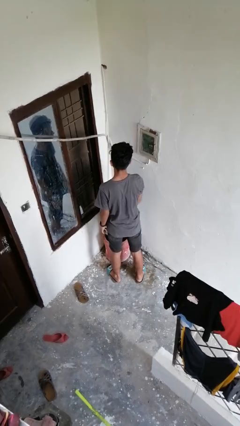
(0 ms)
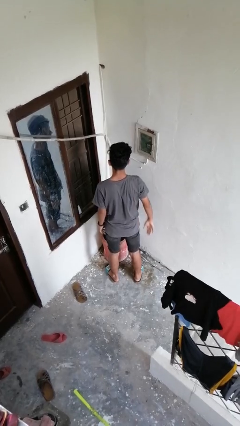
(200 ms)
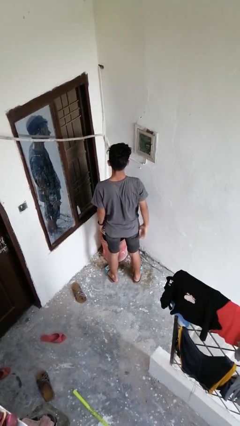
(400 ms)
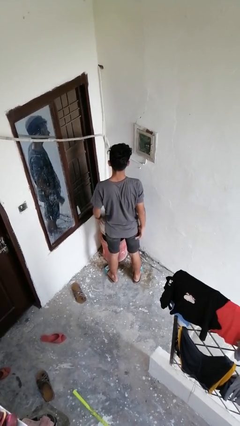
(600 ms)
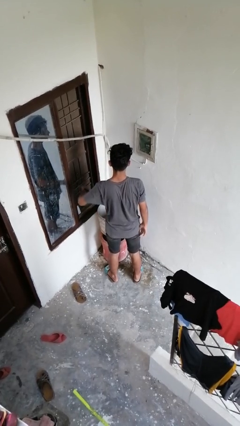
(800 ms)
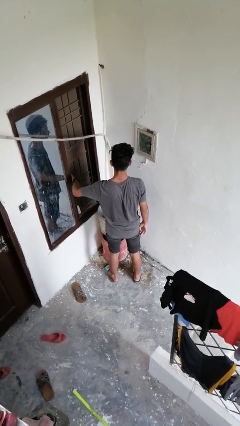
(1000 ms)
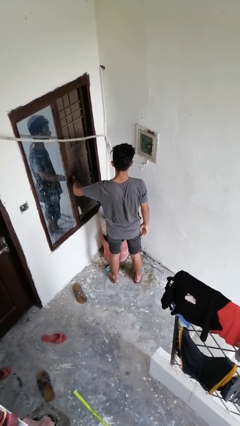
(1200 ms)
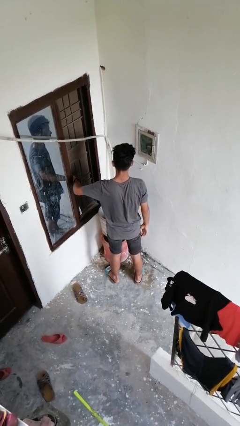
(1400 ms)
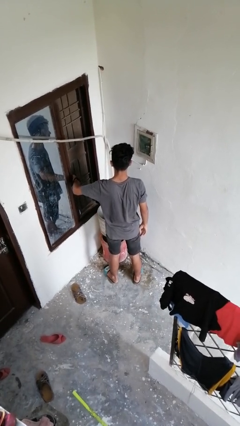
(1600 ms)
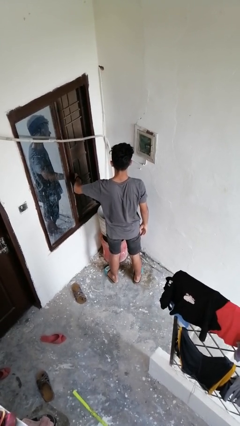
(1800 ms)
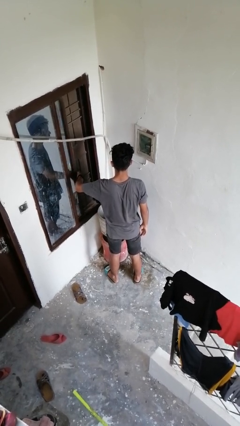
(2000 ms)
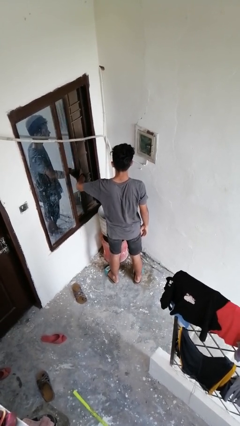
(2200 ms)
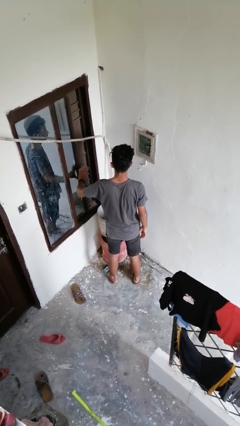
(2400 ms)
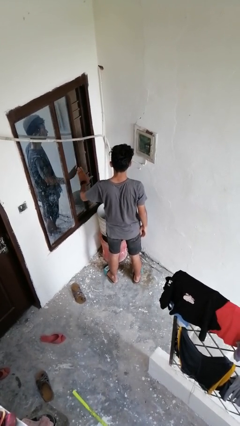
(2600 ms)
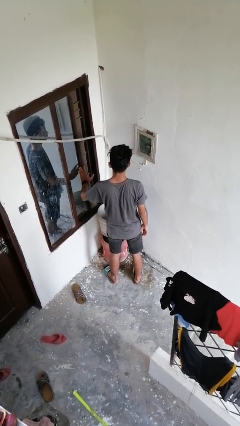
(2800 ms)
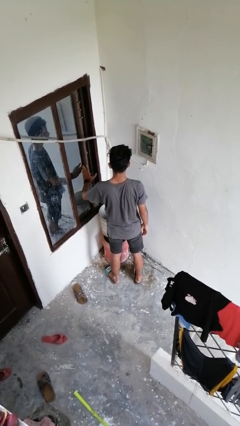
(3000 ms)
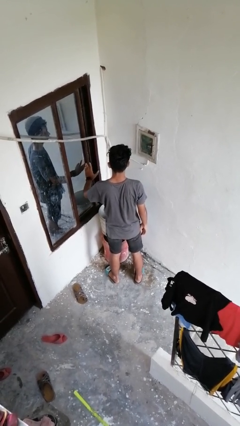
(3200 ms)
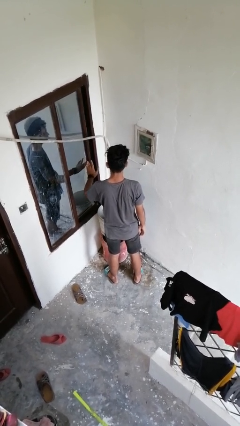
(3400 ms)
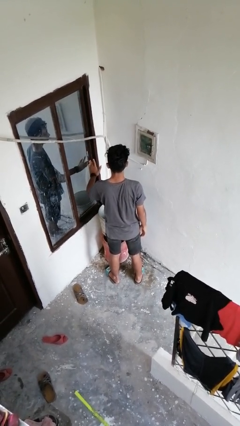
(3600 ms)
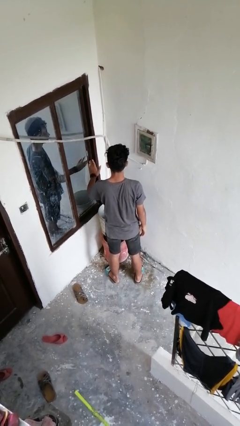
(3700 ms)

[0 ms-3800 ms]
person closes home window

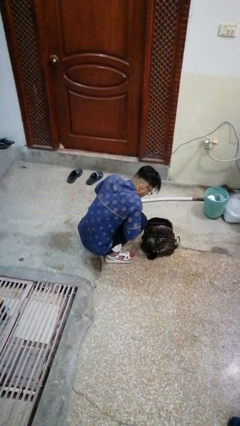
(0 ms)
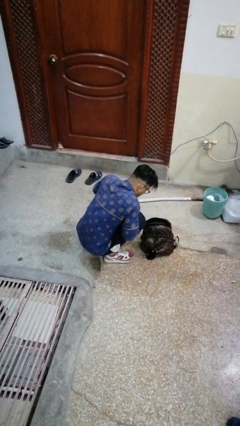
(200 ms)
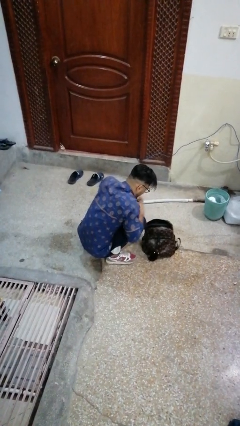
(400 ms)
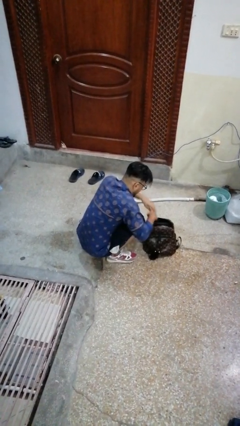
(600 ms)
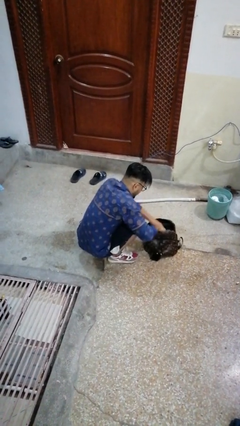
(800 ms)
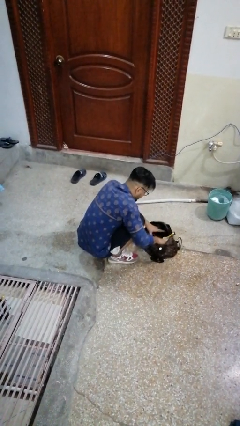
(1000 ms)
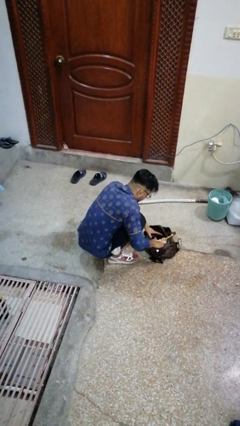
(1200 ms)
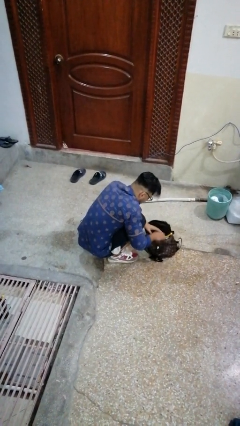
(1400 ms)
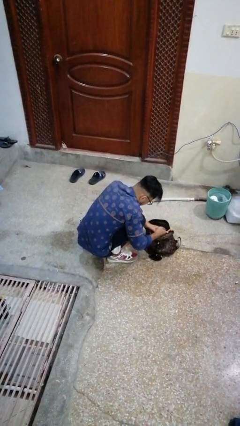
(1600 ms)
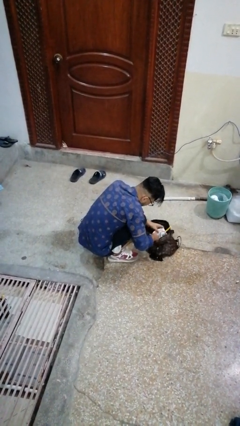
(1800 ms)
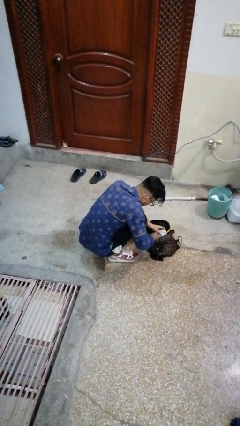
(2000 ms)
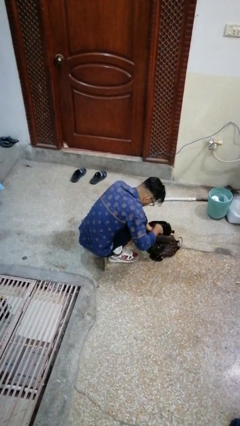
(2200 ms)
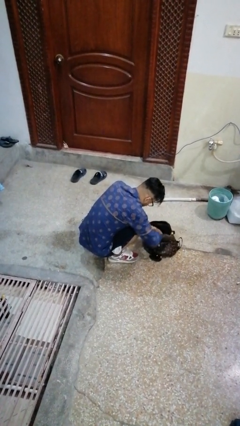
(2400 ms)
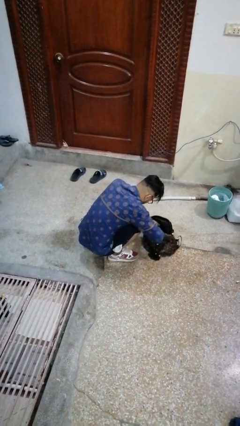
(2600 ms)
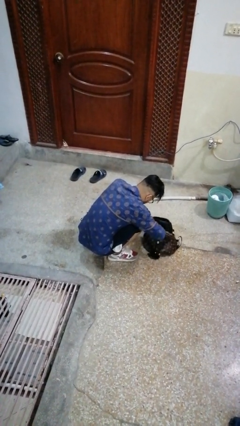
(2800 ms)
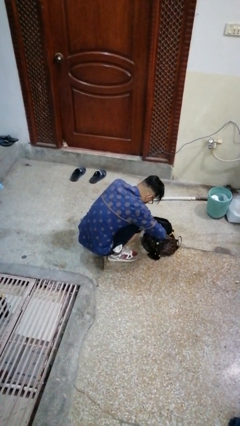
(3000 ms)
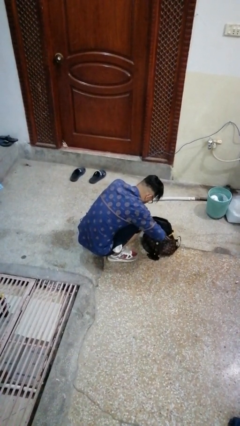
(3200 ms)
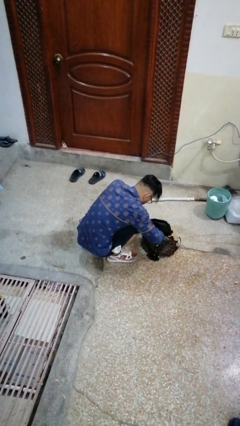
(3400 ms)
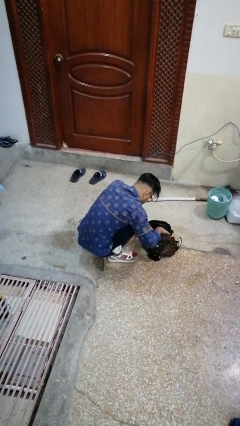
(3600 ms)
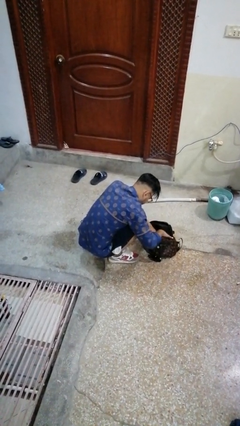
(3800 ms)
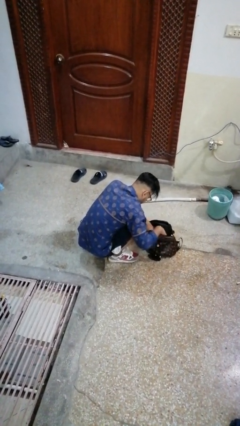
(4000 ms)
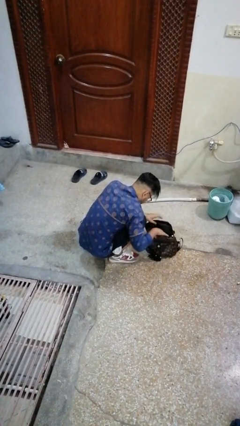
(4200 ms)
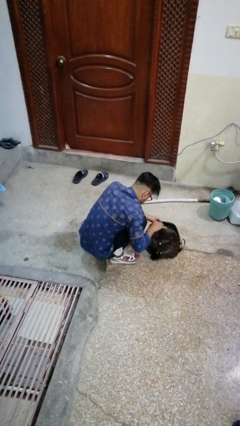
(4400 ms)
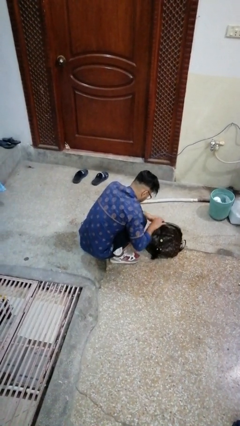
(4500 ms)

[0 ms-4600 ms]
person searches in bag

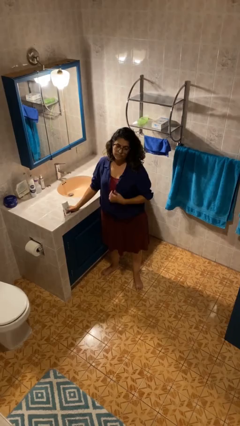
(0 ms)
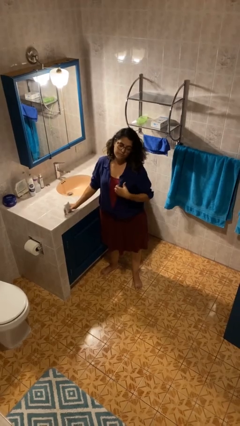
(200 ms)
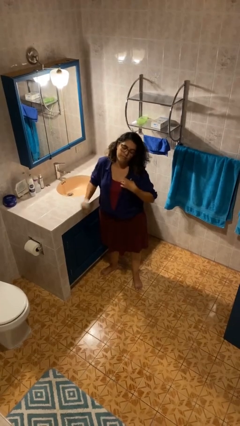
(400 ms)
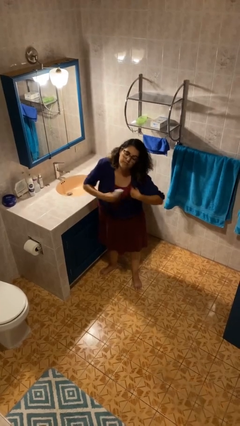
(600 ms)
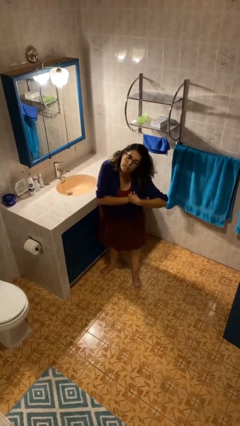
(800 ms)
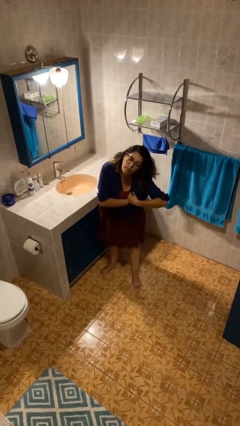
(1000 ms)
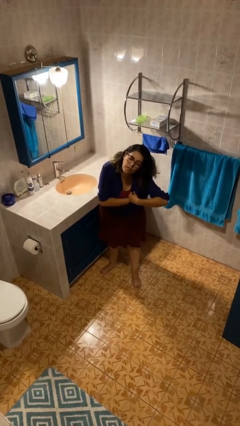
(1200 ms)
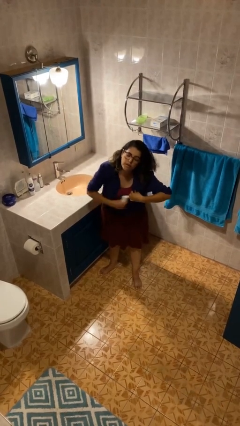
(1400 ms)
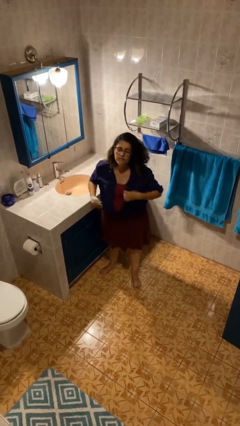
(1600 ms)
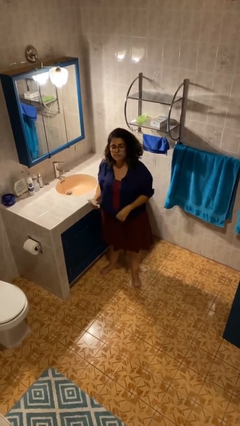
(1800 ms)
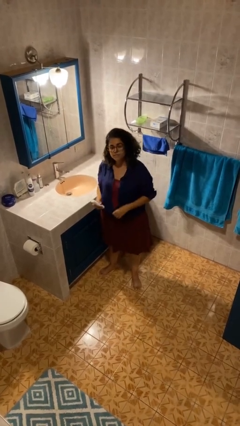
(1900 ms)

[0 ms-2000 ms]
person applies deodorant

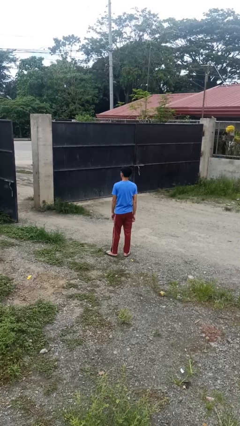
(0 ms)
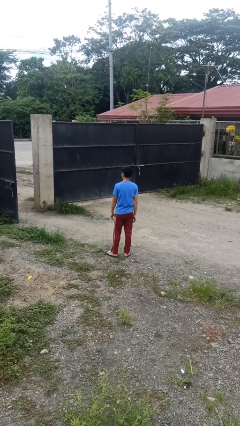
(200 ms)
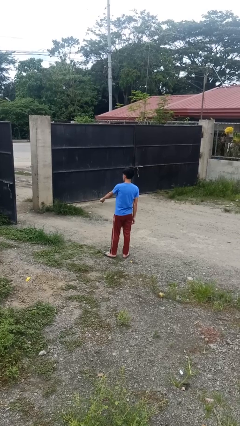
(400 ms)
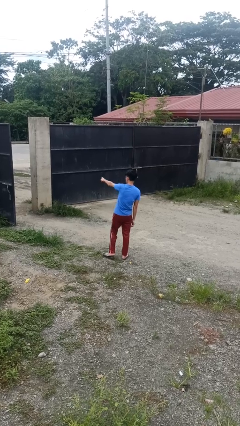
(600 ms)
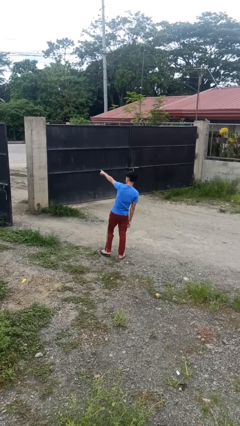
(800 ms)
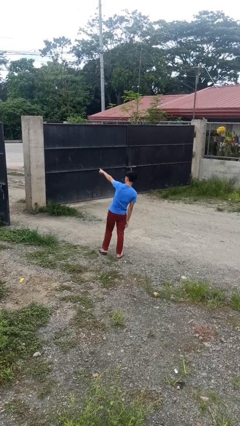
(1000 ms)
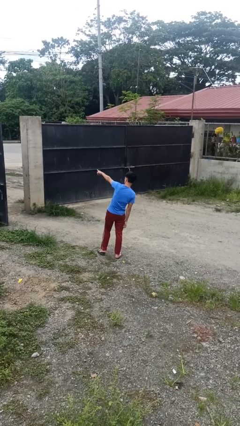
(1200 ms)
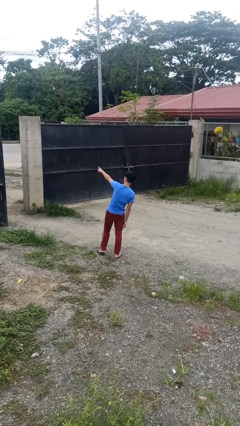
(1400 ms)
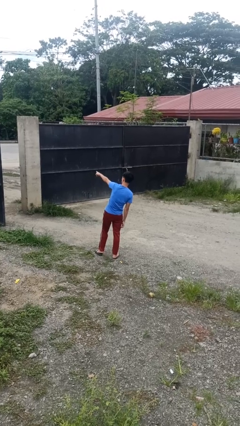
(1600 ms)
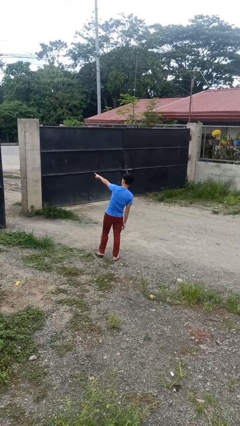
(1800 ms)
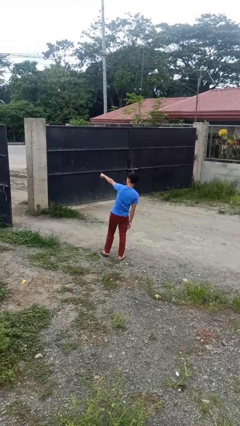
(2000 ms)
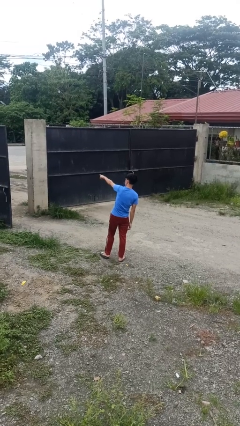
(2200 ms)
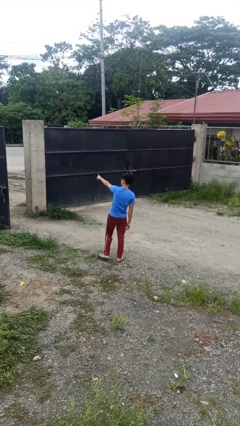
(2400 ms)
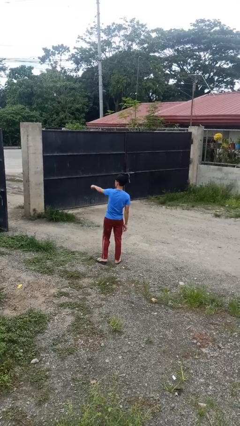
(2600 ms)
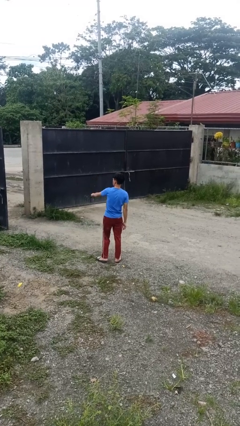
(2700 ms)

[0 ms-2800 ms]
person points at person

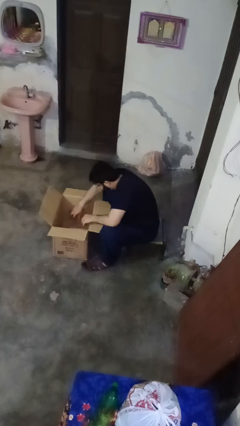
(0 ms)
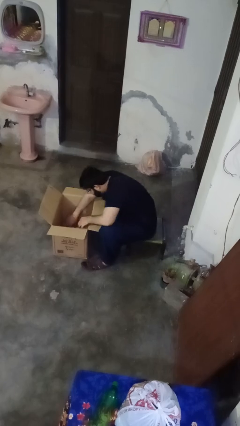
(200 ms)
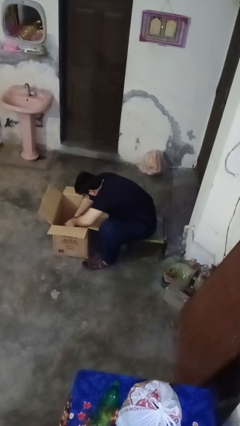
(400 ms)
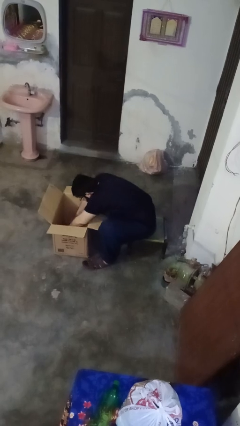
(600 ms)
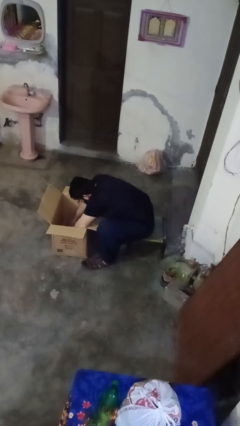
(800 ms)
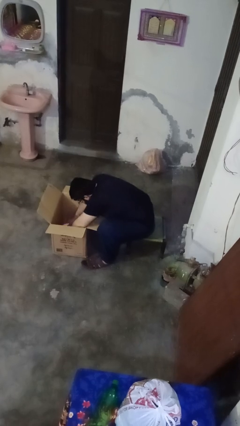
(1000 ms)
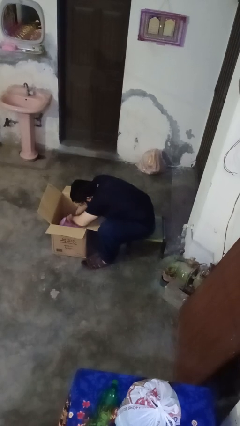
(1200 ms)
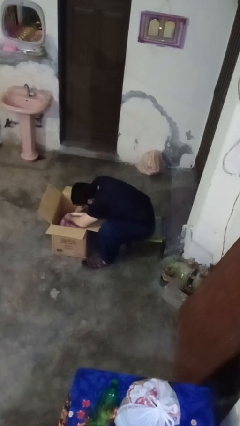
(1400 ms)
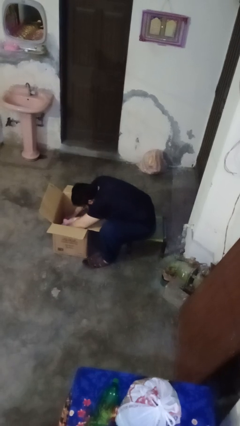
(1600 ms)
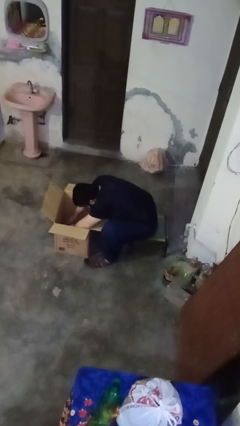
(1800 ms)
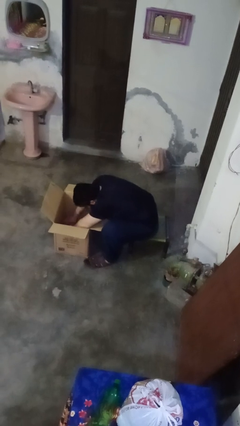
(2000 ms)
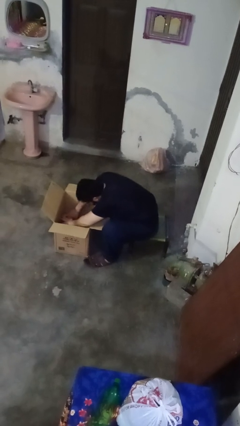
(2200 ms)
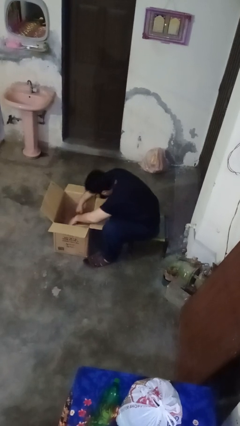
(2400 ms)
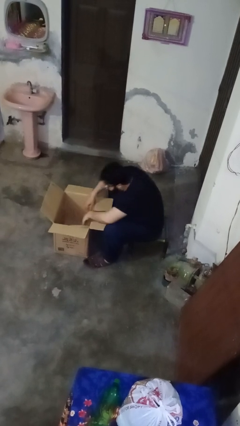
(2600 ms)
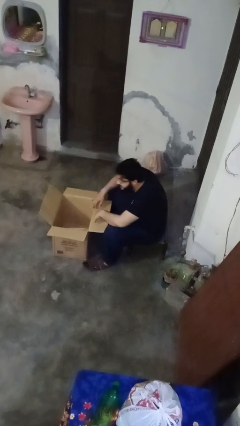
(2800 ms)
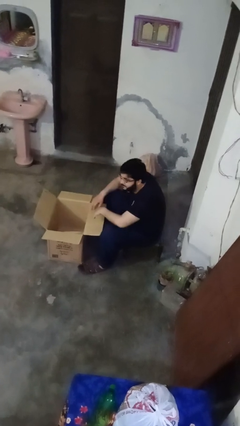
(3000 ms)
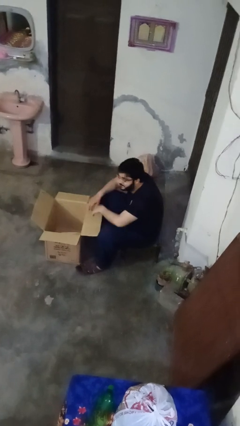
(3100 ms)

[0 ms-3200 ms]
person searches in box

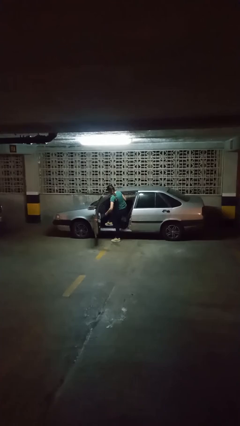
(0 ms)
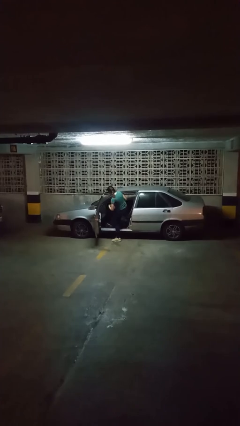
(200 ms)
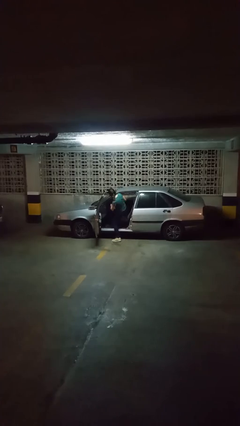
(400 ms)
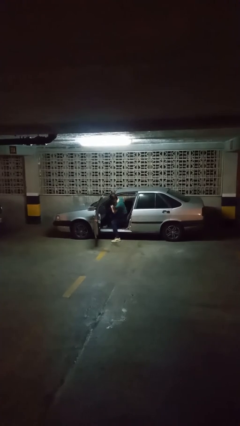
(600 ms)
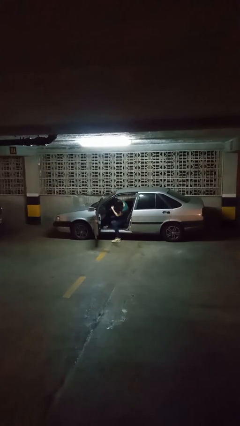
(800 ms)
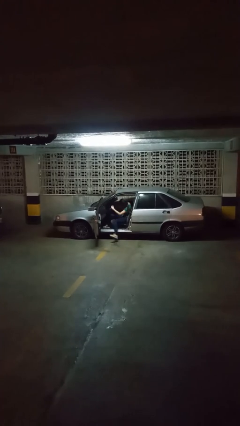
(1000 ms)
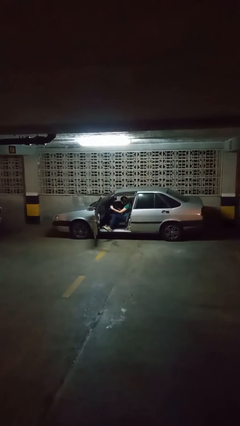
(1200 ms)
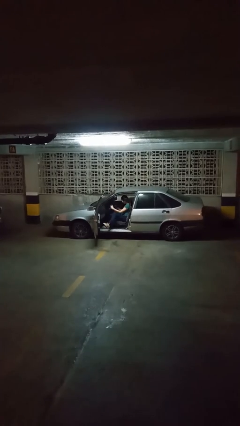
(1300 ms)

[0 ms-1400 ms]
person enters car
